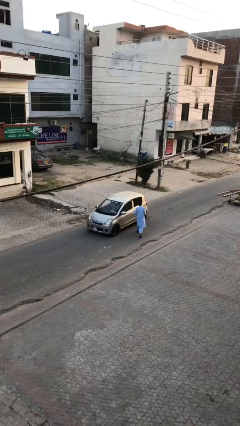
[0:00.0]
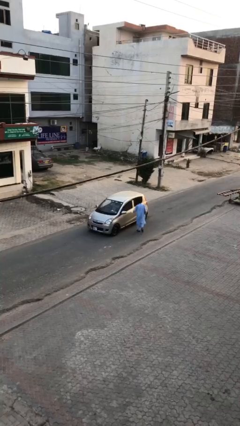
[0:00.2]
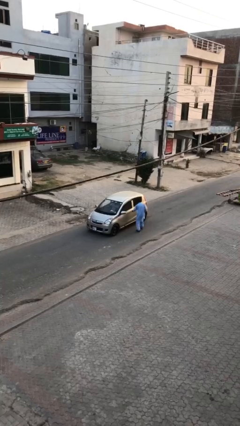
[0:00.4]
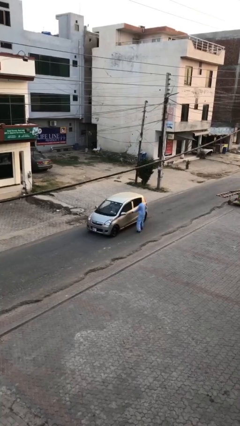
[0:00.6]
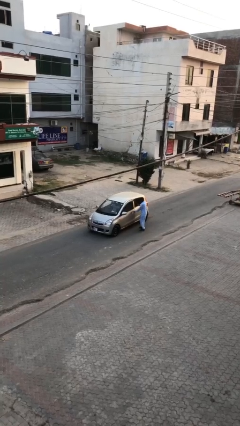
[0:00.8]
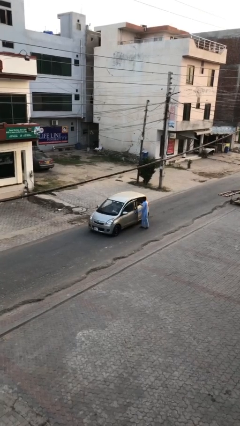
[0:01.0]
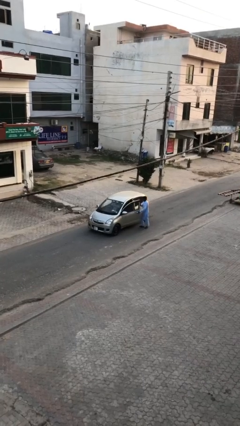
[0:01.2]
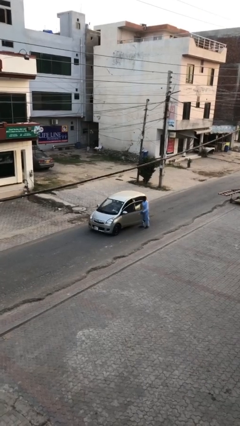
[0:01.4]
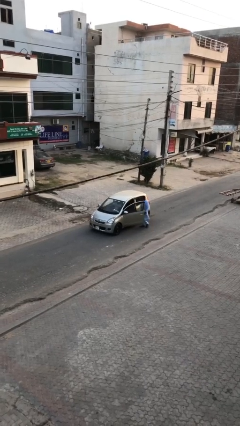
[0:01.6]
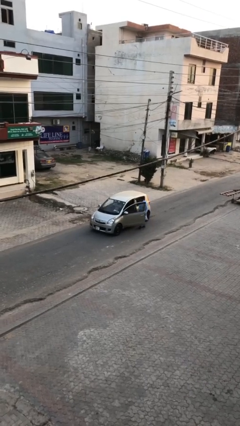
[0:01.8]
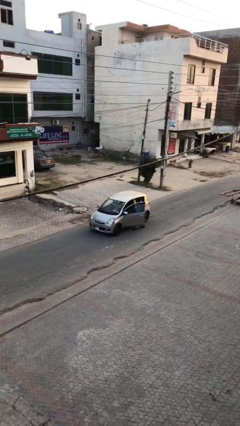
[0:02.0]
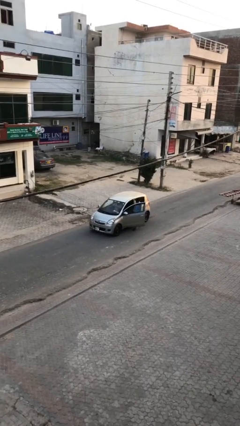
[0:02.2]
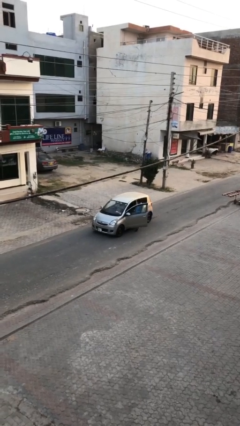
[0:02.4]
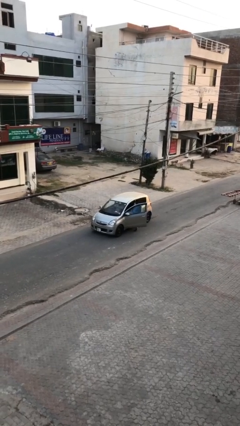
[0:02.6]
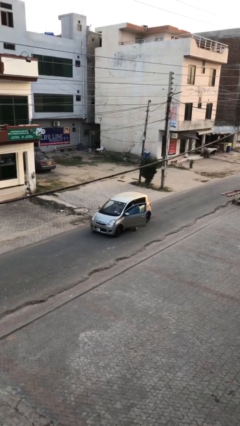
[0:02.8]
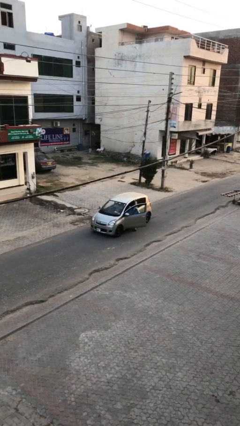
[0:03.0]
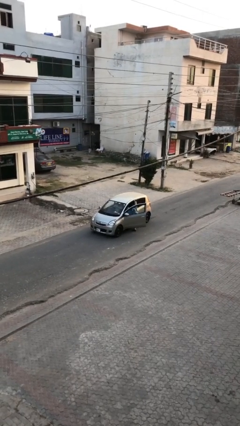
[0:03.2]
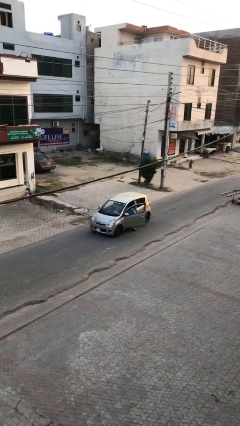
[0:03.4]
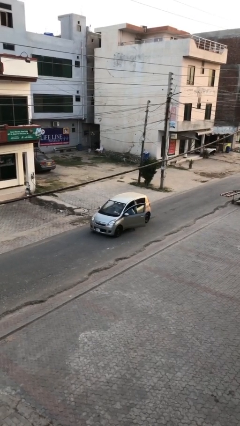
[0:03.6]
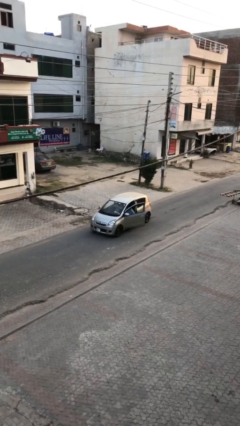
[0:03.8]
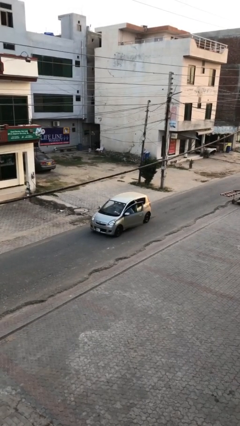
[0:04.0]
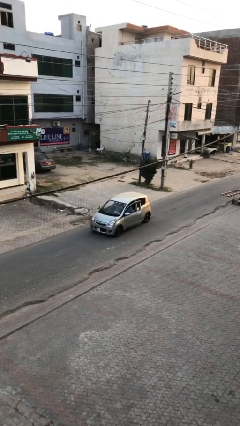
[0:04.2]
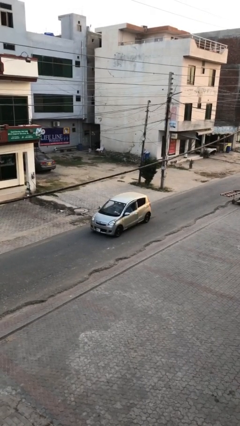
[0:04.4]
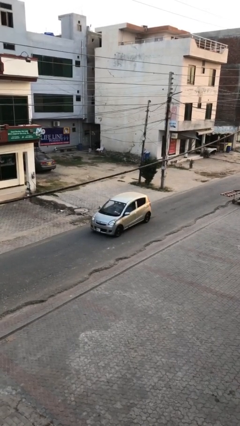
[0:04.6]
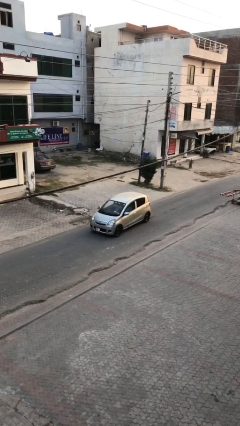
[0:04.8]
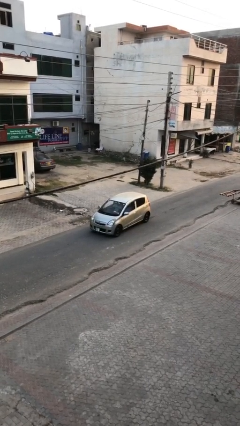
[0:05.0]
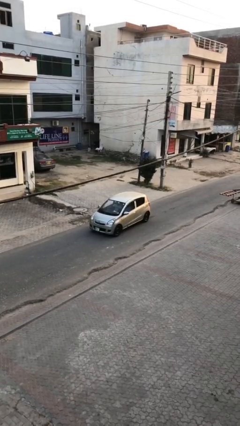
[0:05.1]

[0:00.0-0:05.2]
car picks up person

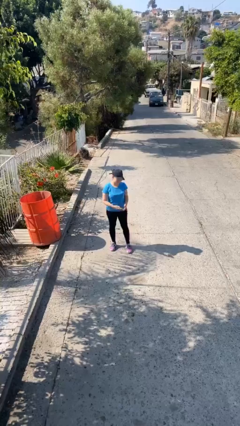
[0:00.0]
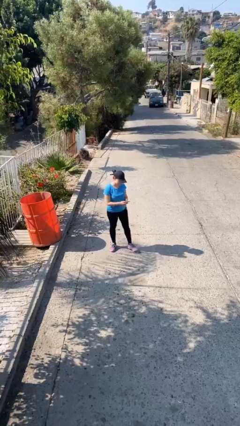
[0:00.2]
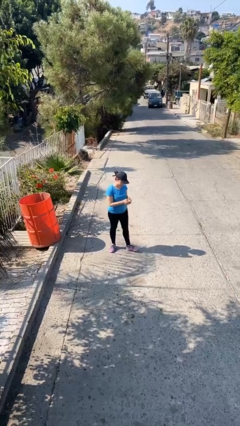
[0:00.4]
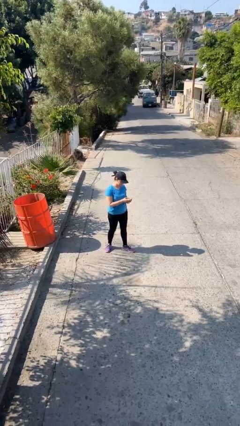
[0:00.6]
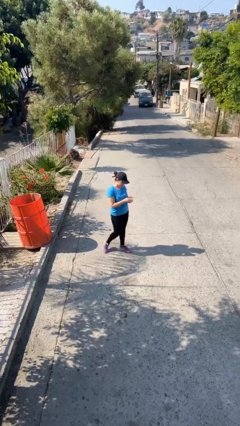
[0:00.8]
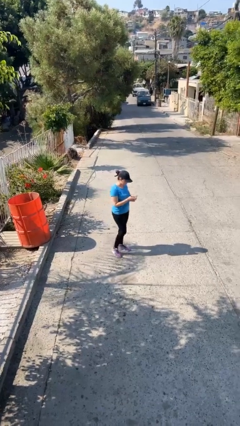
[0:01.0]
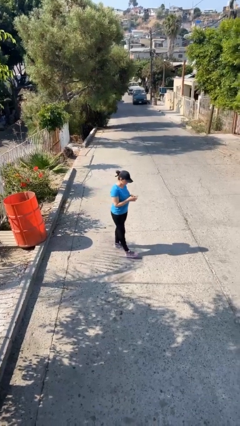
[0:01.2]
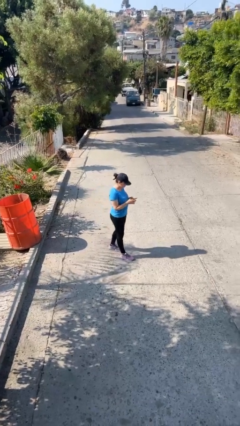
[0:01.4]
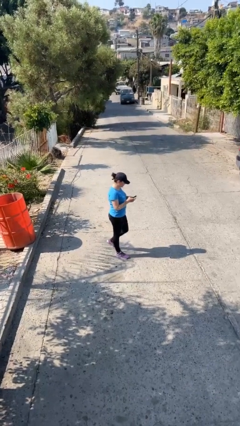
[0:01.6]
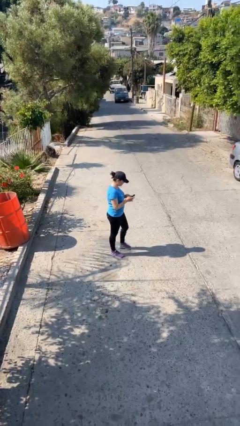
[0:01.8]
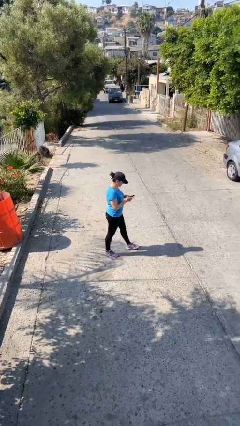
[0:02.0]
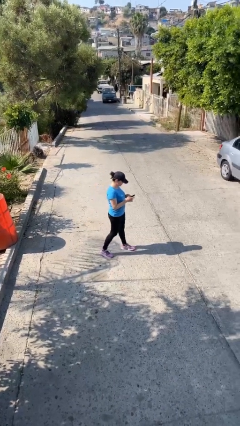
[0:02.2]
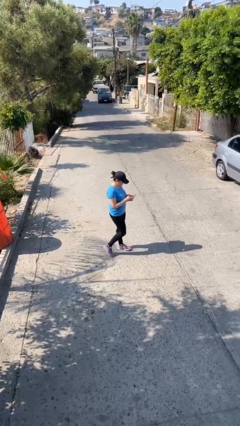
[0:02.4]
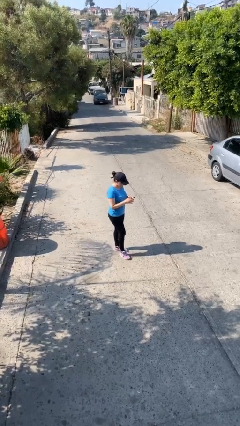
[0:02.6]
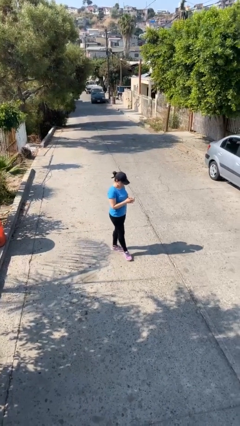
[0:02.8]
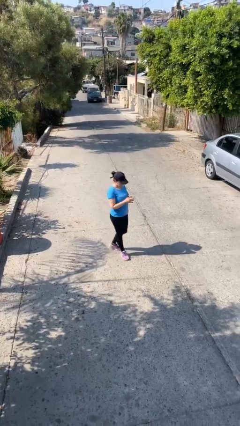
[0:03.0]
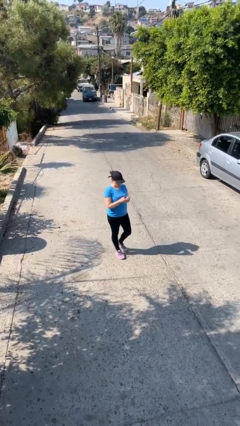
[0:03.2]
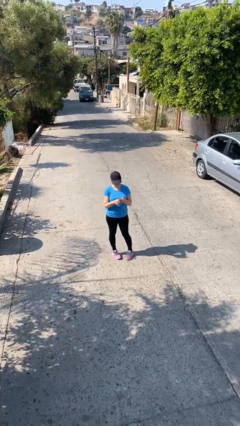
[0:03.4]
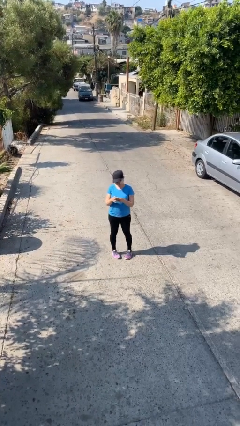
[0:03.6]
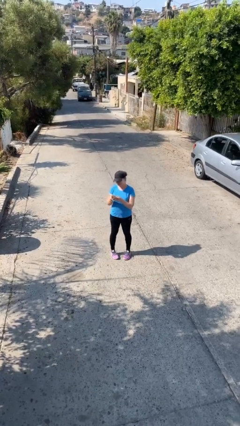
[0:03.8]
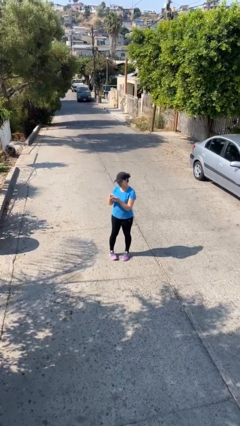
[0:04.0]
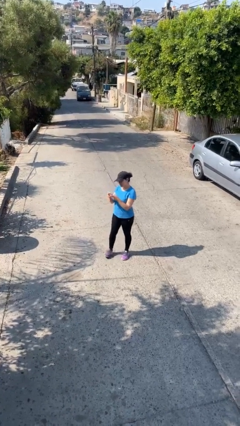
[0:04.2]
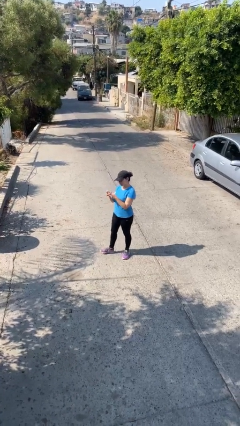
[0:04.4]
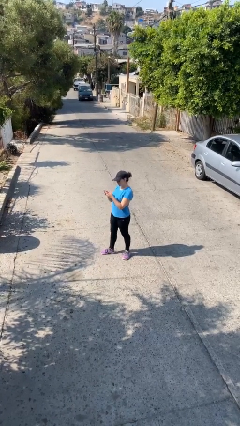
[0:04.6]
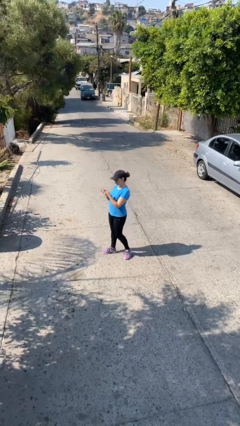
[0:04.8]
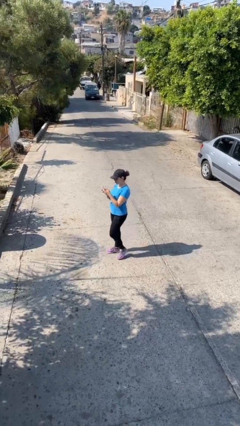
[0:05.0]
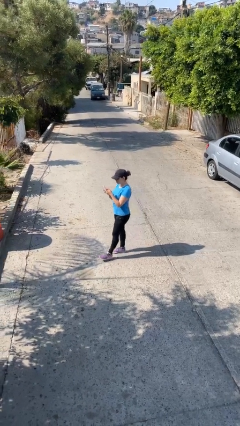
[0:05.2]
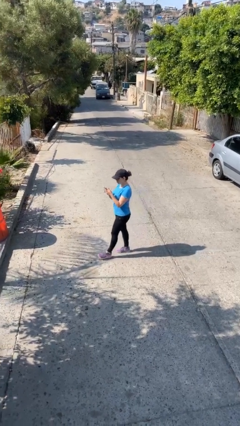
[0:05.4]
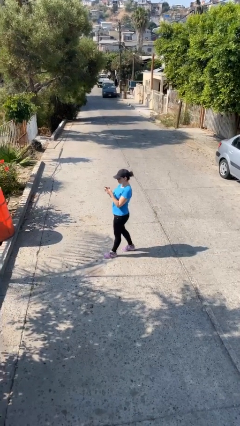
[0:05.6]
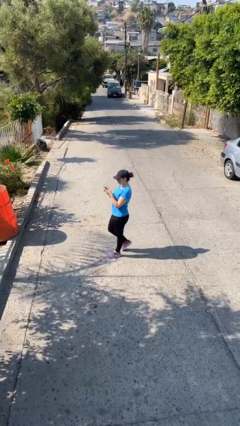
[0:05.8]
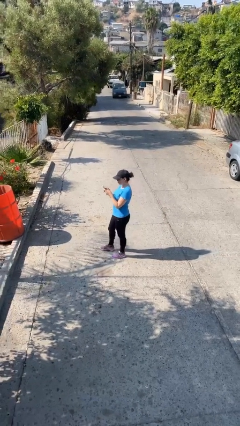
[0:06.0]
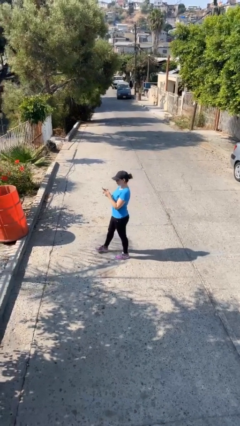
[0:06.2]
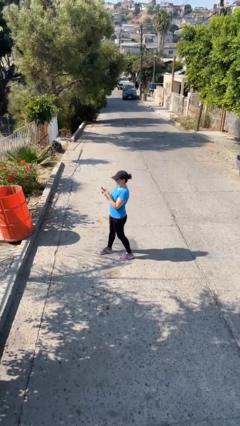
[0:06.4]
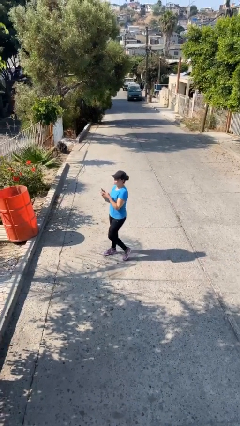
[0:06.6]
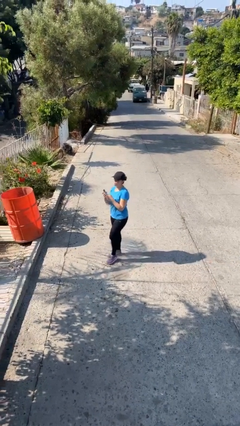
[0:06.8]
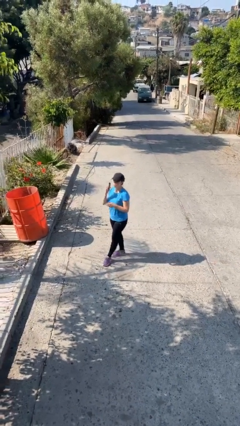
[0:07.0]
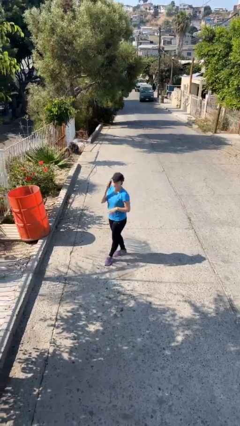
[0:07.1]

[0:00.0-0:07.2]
person texts on phone

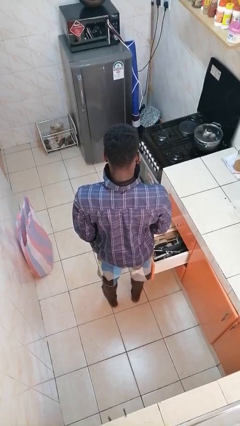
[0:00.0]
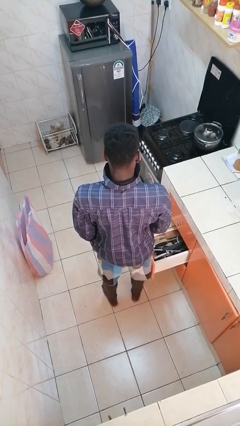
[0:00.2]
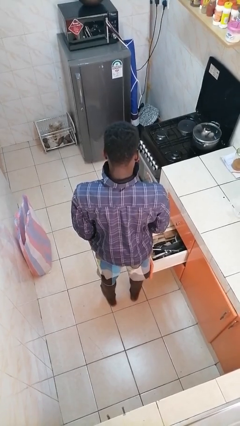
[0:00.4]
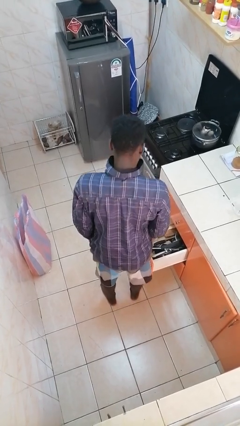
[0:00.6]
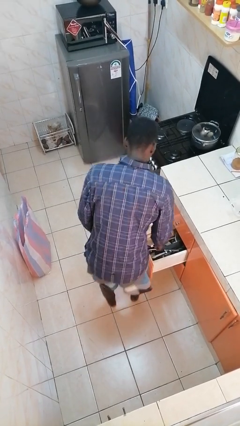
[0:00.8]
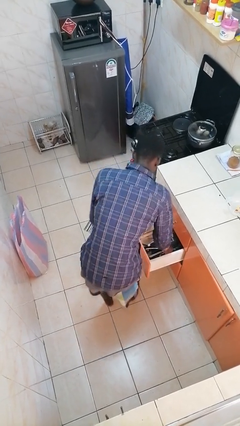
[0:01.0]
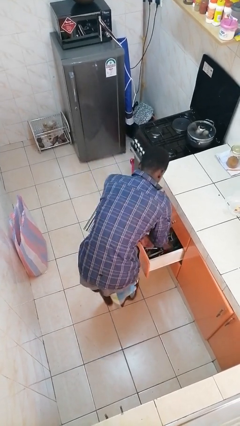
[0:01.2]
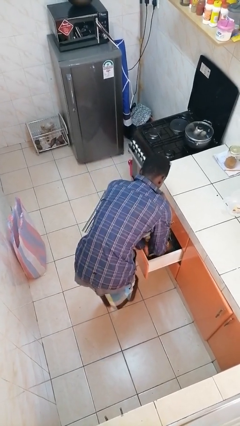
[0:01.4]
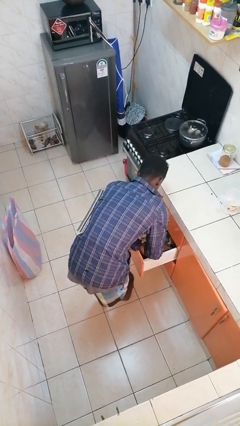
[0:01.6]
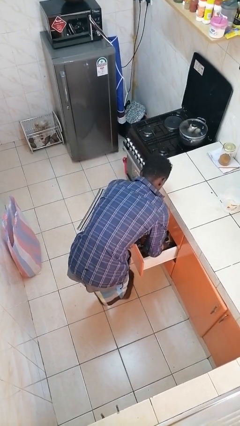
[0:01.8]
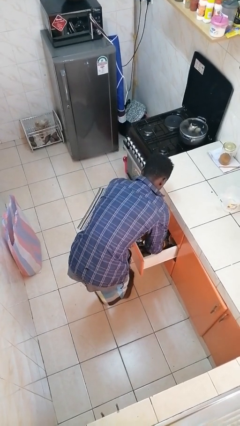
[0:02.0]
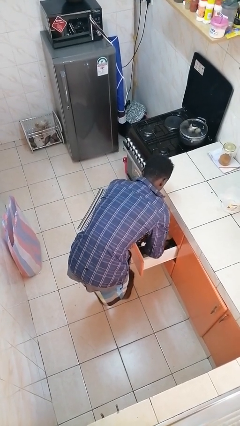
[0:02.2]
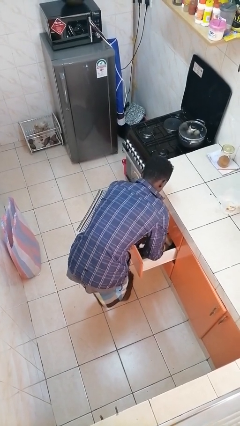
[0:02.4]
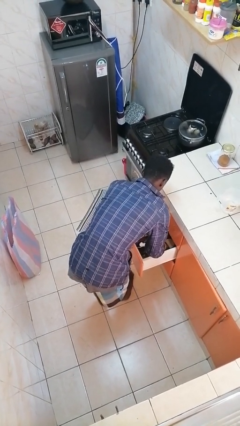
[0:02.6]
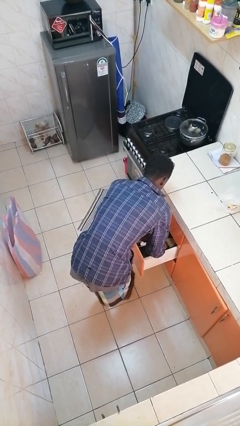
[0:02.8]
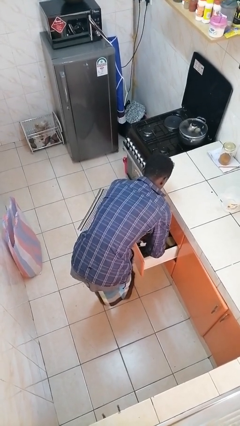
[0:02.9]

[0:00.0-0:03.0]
person searches in kitchen drawer

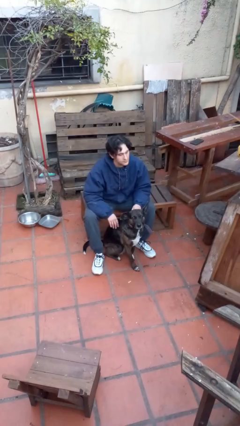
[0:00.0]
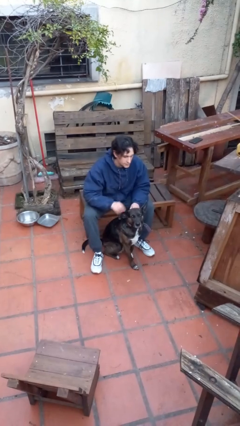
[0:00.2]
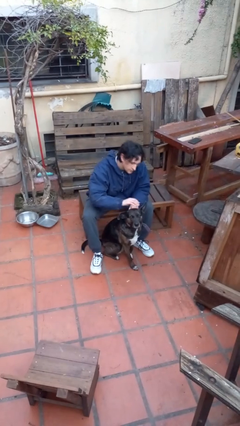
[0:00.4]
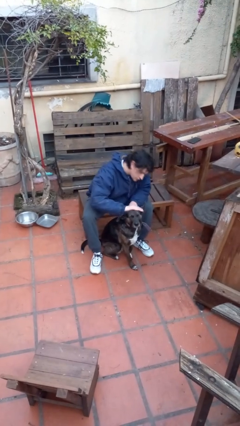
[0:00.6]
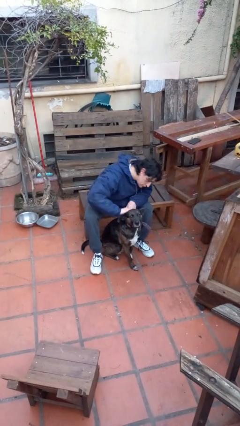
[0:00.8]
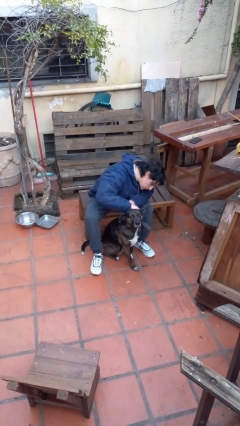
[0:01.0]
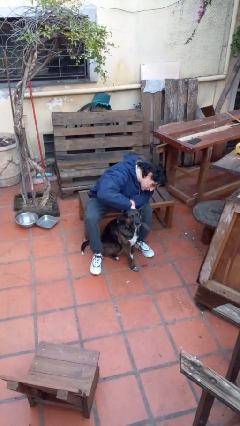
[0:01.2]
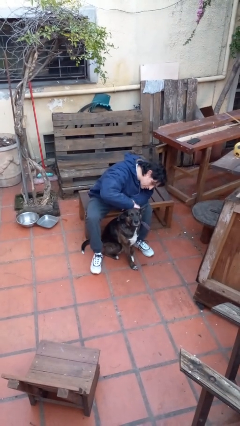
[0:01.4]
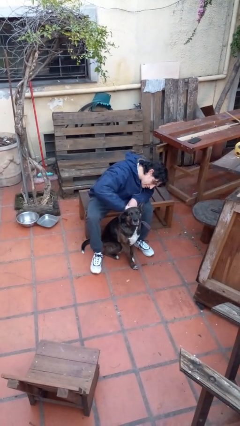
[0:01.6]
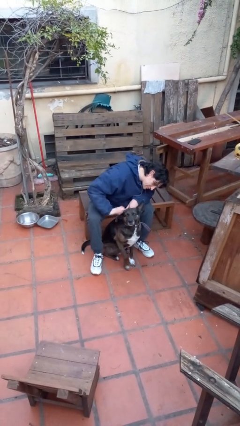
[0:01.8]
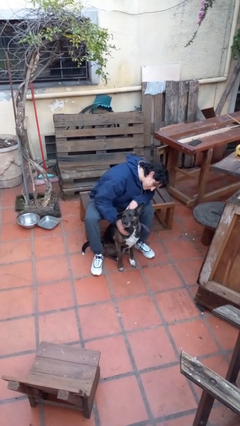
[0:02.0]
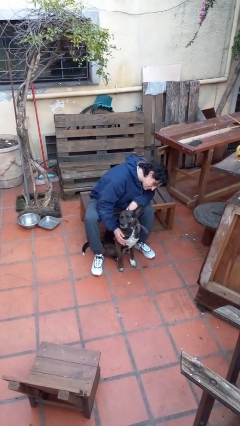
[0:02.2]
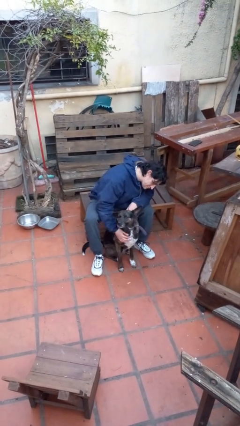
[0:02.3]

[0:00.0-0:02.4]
person pets dog

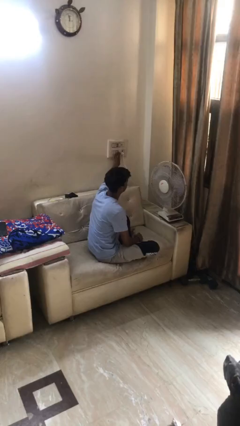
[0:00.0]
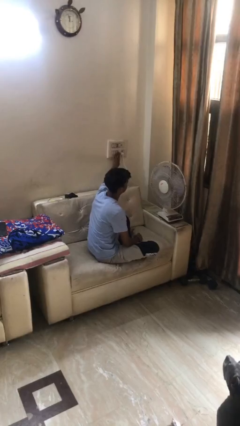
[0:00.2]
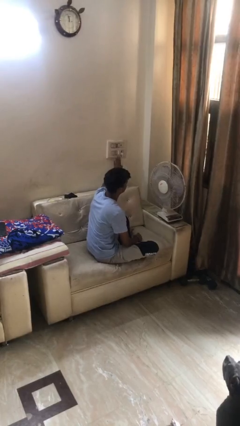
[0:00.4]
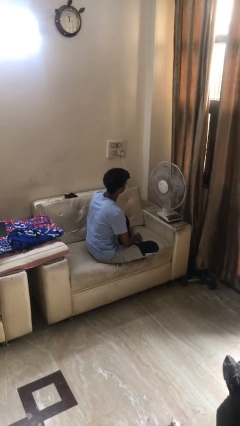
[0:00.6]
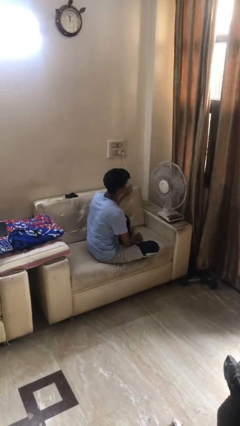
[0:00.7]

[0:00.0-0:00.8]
person turns off fan
